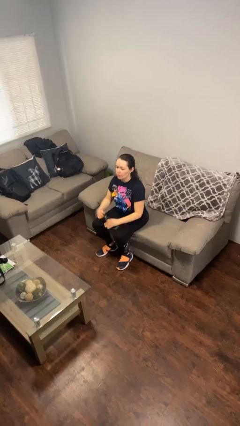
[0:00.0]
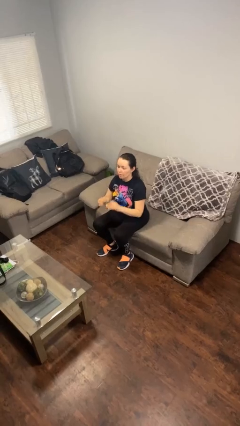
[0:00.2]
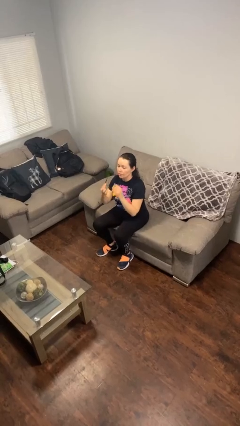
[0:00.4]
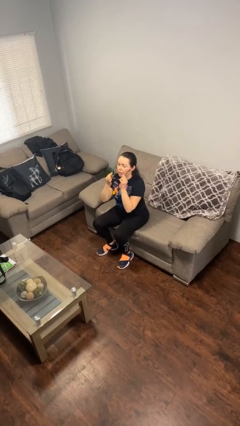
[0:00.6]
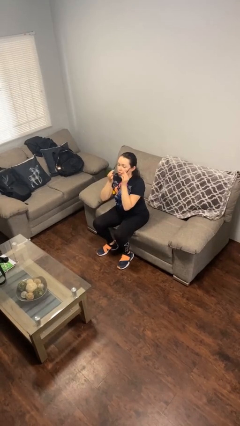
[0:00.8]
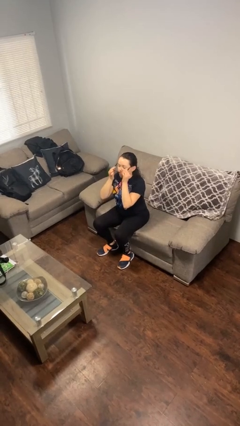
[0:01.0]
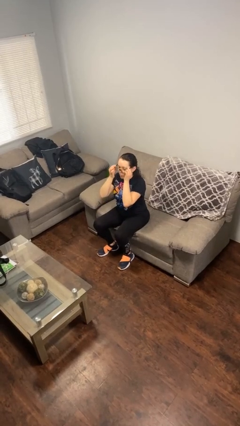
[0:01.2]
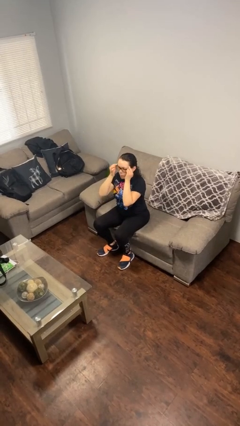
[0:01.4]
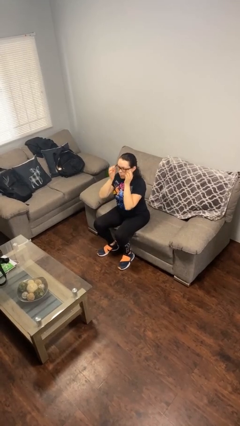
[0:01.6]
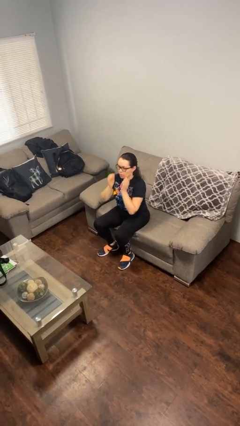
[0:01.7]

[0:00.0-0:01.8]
person puts on glasses

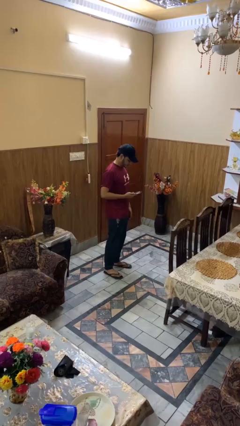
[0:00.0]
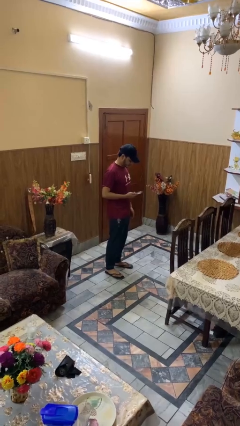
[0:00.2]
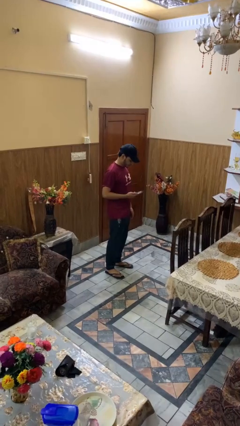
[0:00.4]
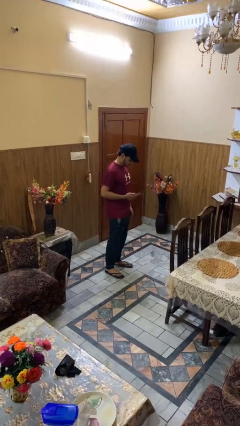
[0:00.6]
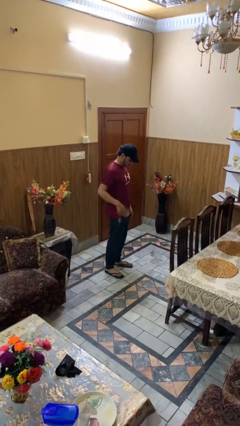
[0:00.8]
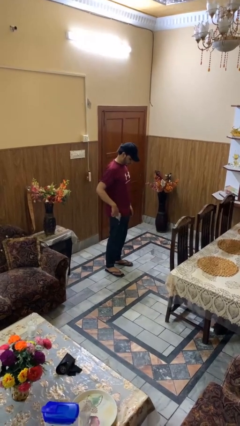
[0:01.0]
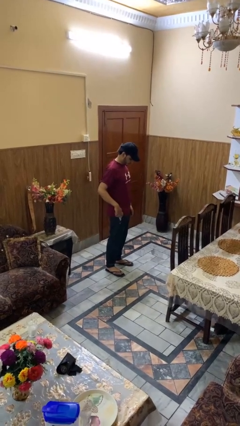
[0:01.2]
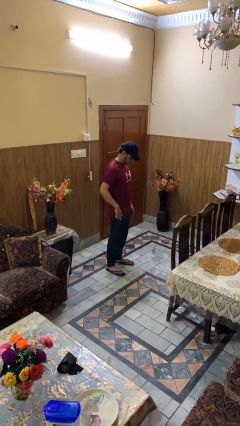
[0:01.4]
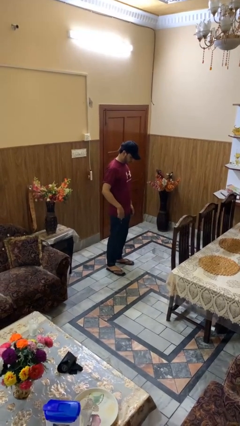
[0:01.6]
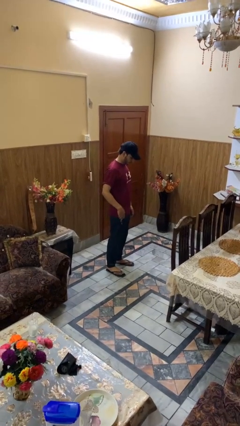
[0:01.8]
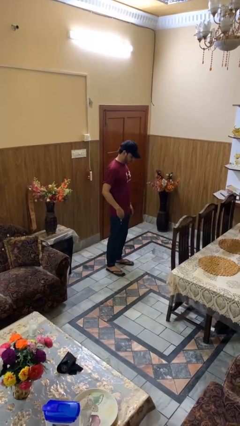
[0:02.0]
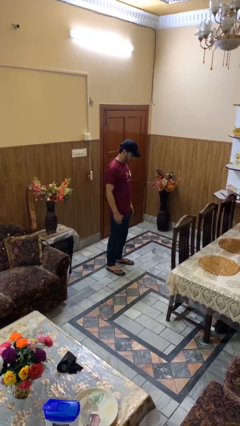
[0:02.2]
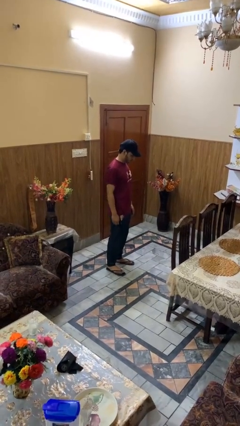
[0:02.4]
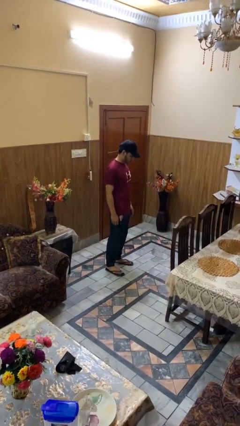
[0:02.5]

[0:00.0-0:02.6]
person puts phone into pocket

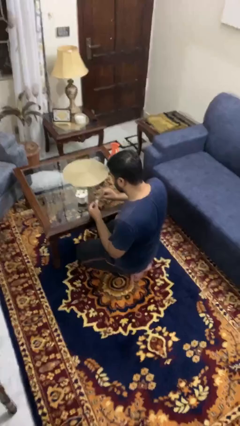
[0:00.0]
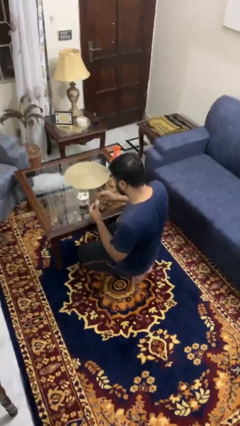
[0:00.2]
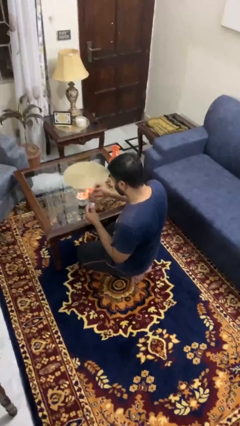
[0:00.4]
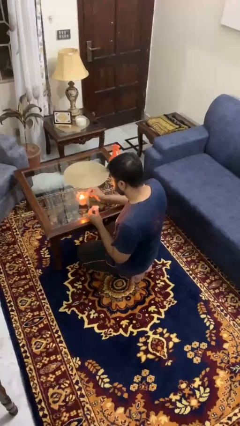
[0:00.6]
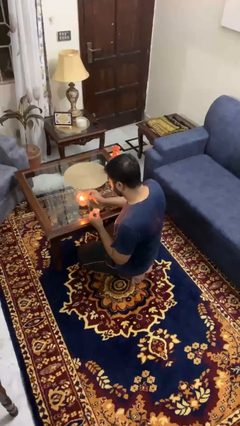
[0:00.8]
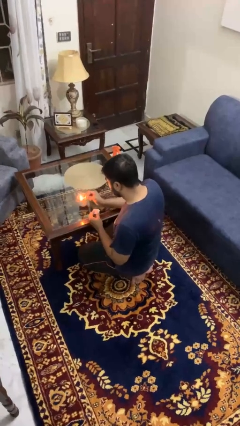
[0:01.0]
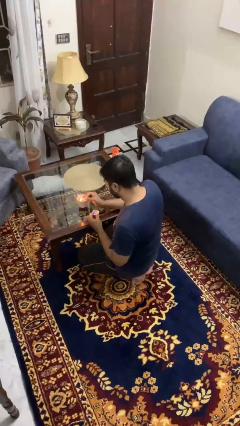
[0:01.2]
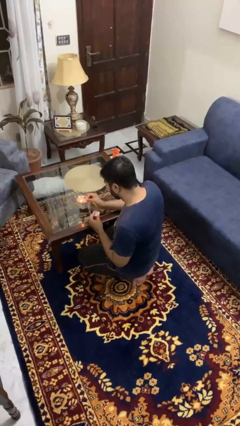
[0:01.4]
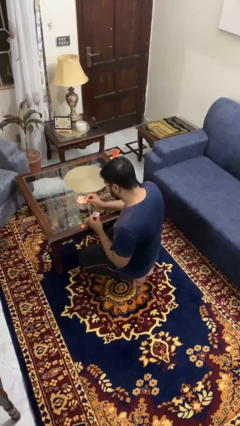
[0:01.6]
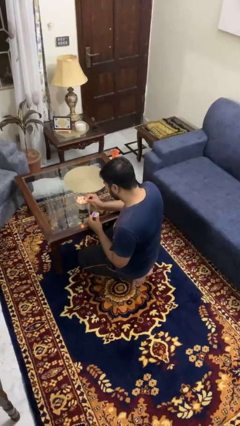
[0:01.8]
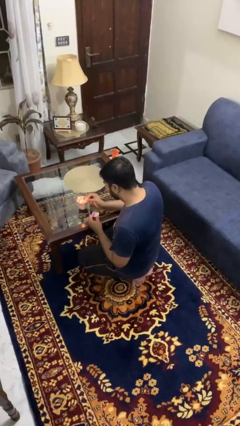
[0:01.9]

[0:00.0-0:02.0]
person lights candle

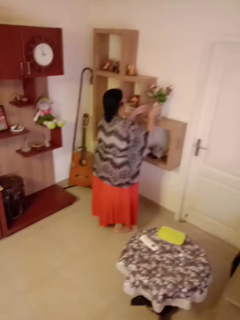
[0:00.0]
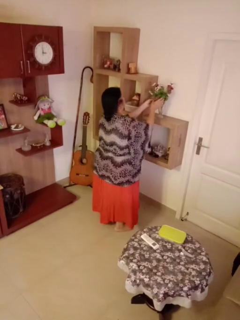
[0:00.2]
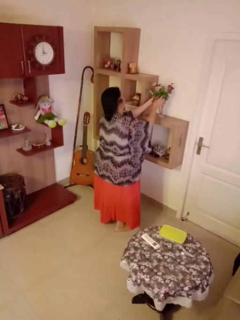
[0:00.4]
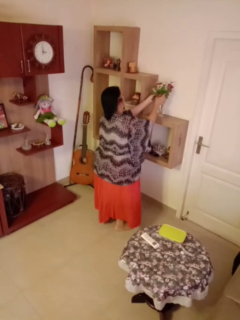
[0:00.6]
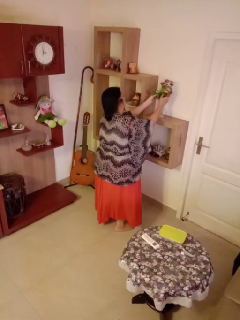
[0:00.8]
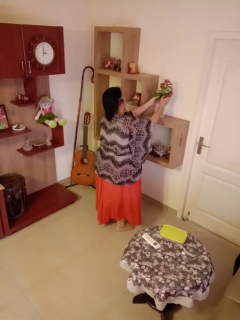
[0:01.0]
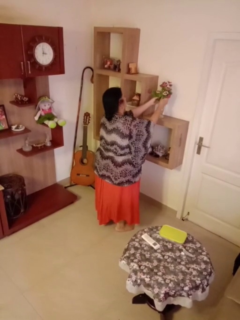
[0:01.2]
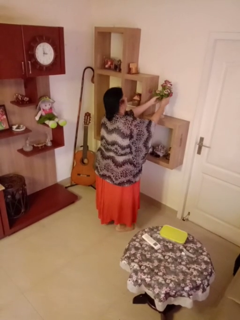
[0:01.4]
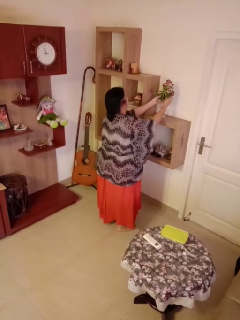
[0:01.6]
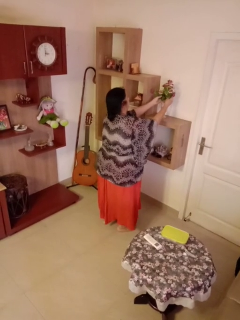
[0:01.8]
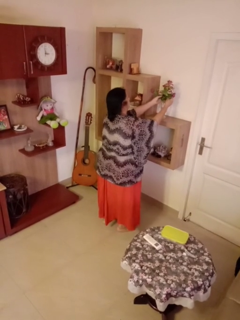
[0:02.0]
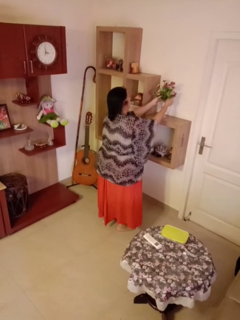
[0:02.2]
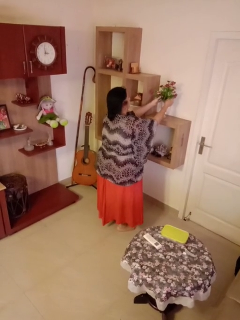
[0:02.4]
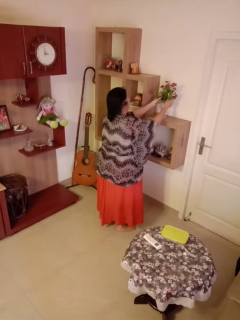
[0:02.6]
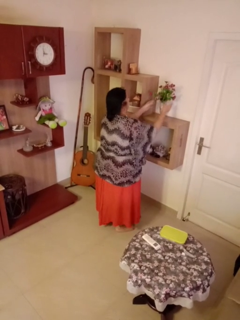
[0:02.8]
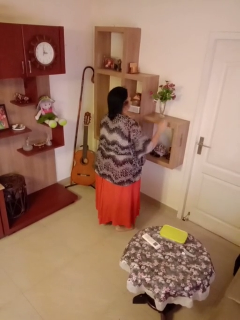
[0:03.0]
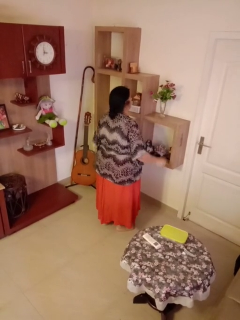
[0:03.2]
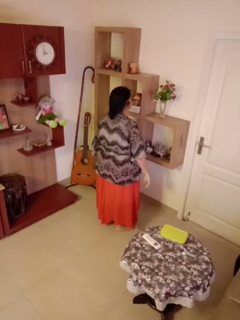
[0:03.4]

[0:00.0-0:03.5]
person arranges flowers in vase

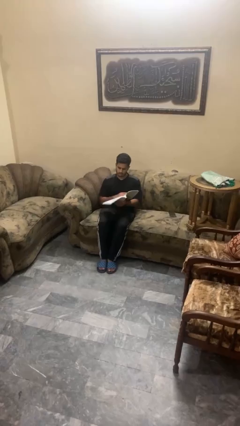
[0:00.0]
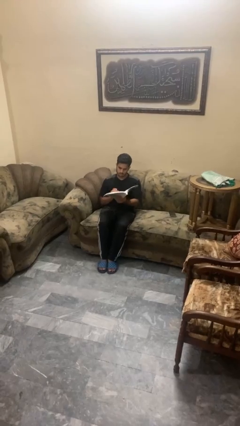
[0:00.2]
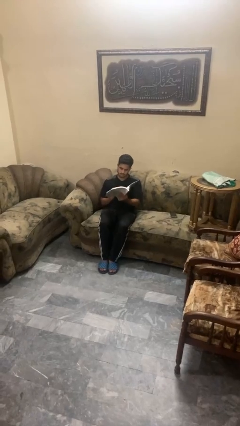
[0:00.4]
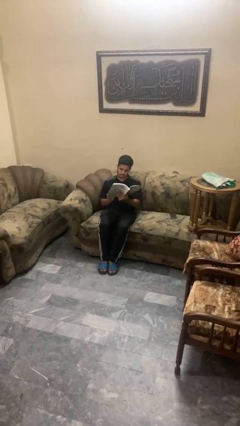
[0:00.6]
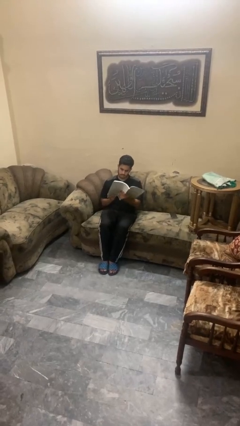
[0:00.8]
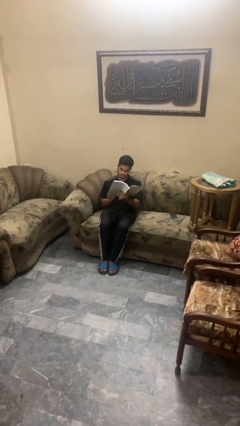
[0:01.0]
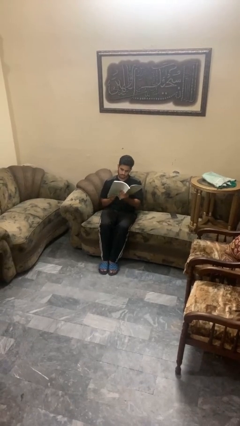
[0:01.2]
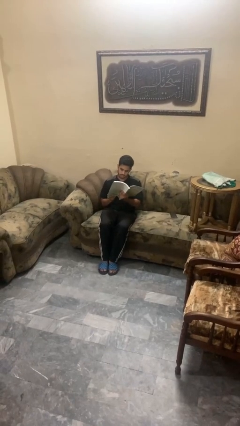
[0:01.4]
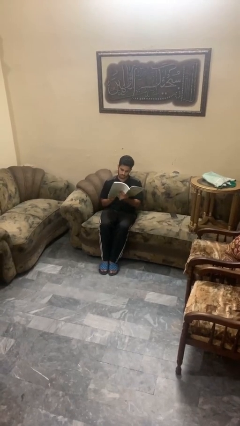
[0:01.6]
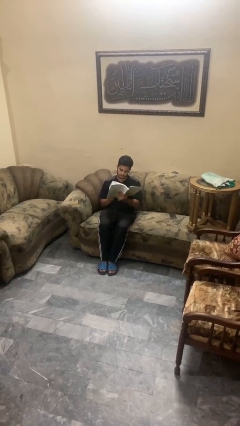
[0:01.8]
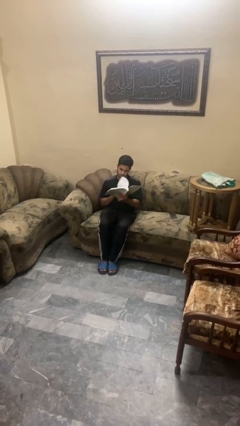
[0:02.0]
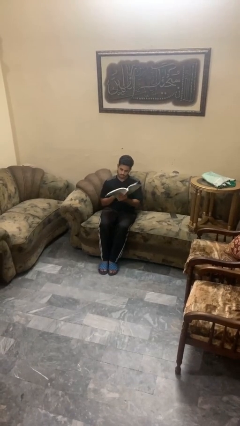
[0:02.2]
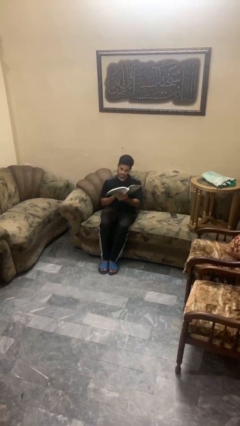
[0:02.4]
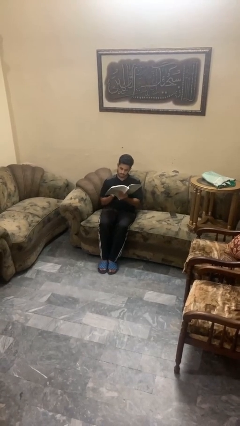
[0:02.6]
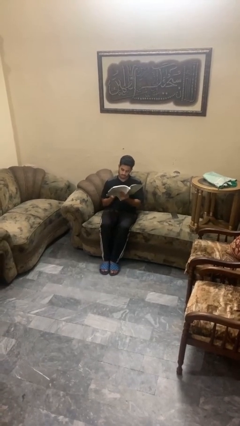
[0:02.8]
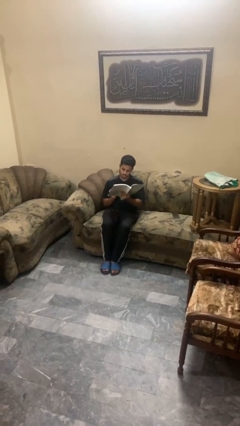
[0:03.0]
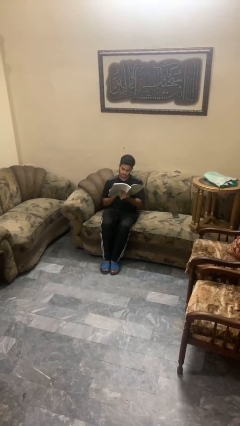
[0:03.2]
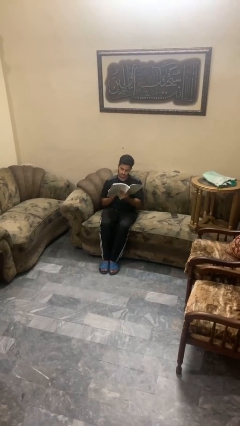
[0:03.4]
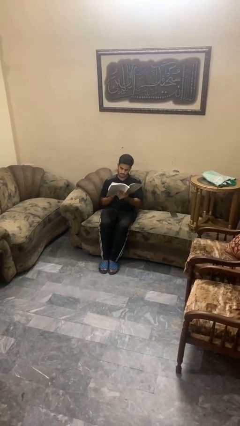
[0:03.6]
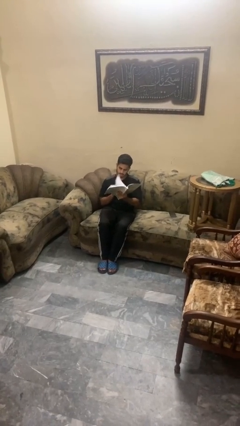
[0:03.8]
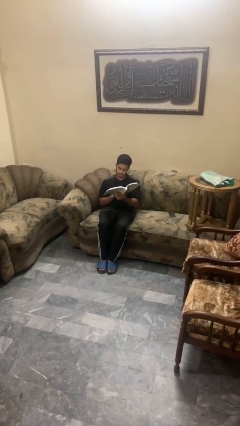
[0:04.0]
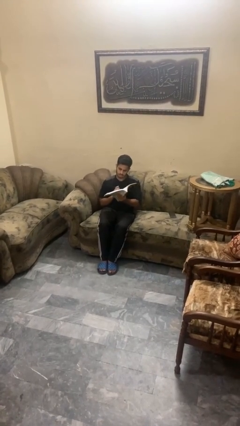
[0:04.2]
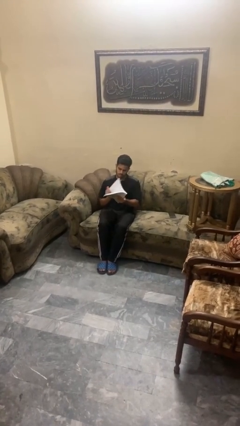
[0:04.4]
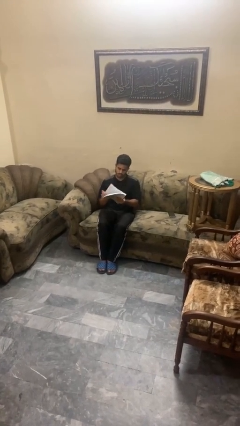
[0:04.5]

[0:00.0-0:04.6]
person reads book

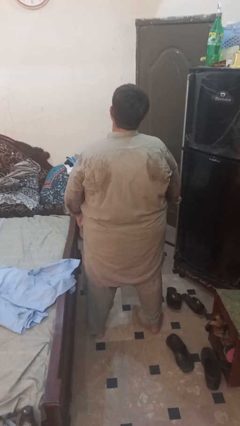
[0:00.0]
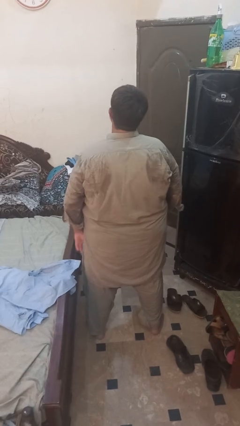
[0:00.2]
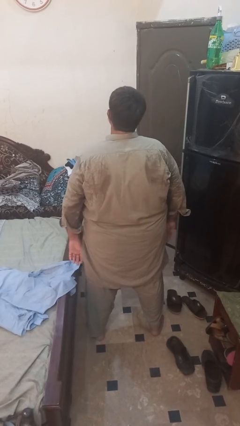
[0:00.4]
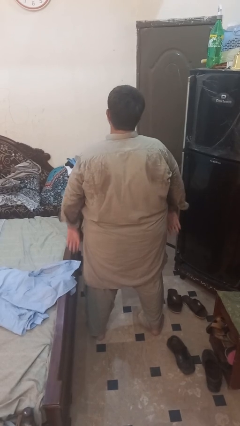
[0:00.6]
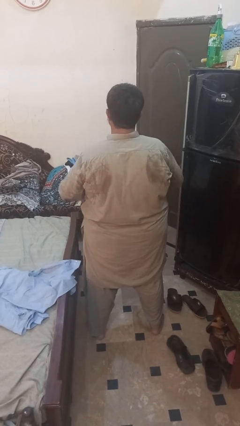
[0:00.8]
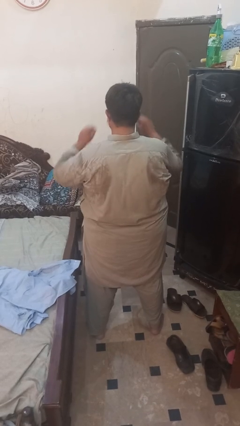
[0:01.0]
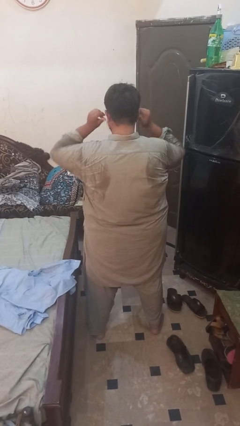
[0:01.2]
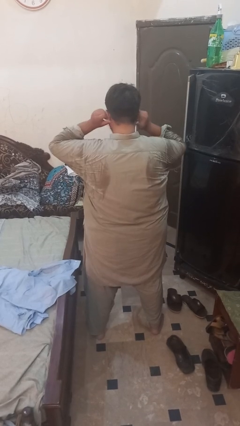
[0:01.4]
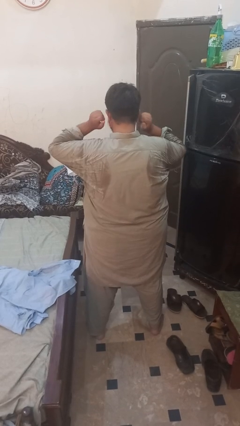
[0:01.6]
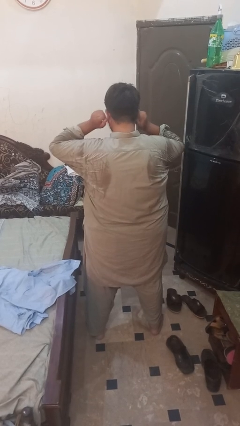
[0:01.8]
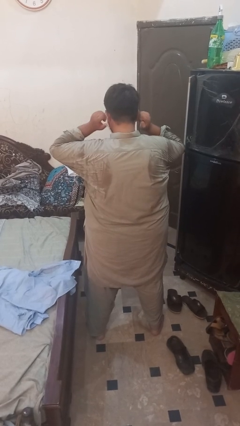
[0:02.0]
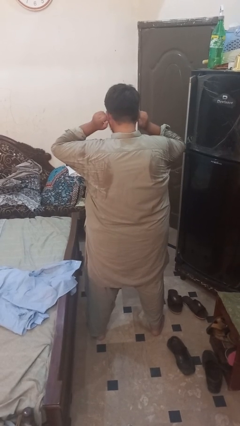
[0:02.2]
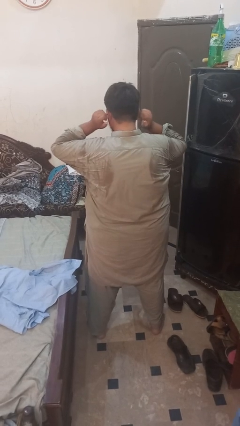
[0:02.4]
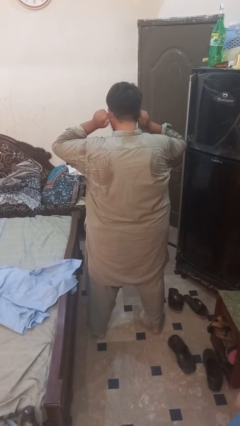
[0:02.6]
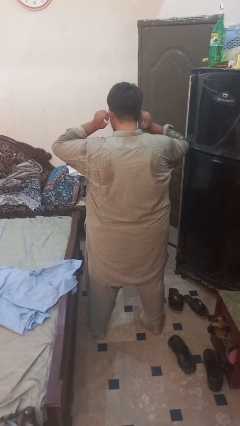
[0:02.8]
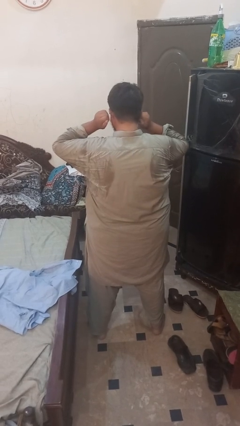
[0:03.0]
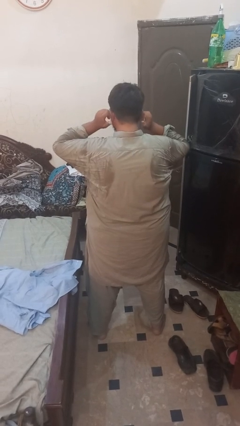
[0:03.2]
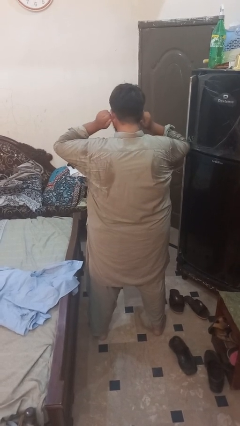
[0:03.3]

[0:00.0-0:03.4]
person touches earlobe

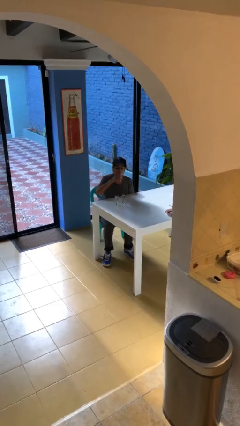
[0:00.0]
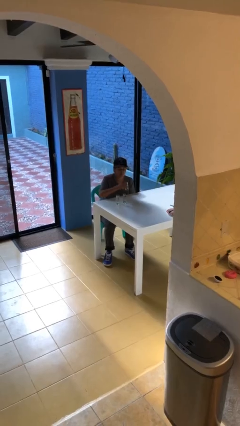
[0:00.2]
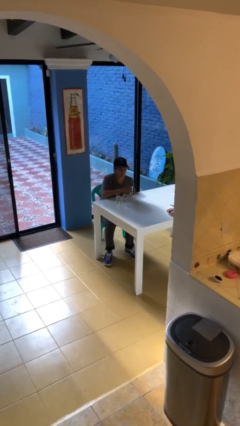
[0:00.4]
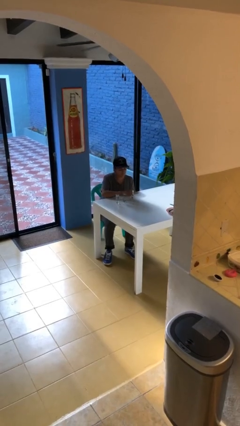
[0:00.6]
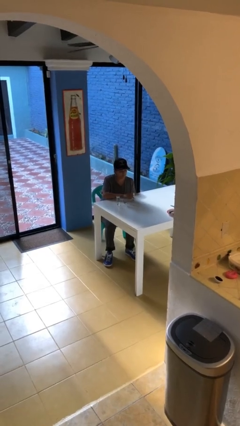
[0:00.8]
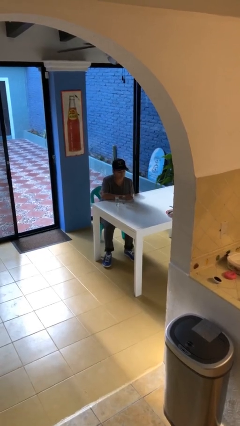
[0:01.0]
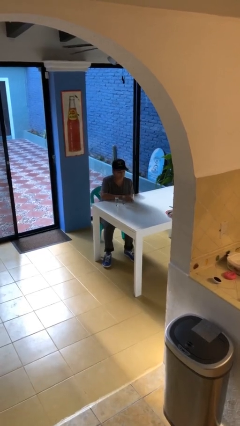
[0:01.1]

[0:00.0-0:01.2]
person puts down object on table
